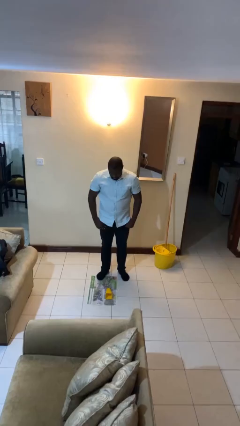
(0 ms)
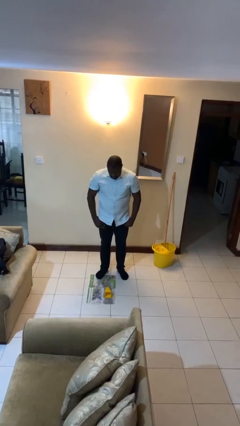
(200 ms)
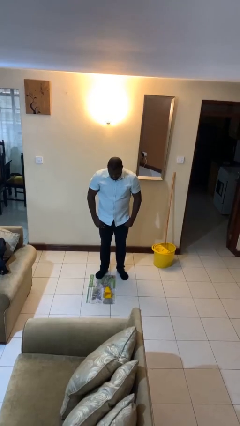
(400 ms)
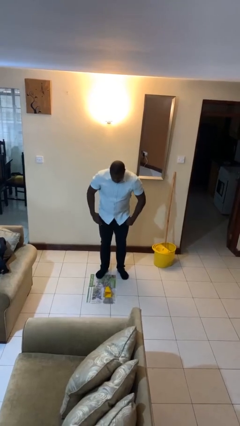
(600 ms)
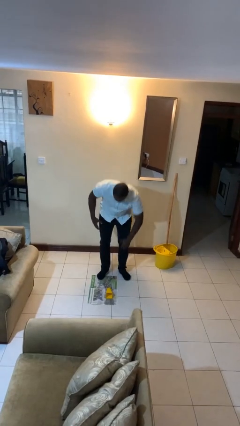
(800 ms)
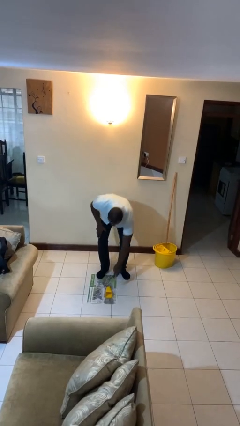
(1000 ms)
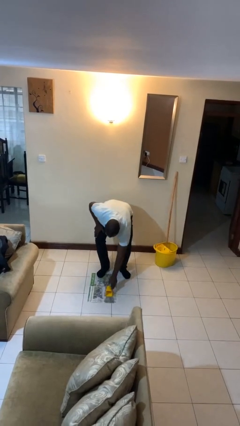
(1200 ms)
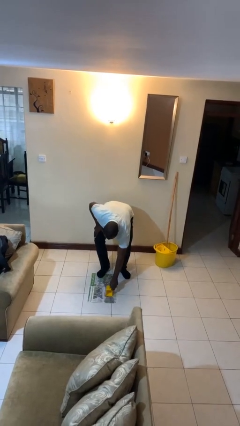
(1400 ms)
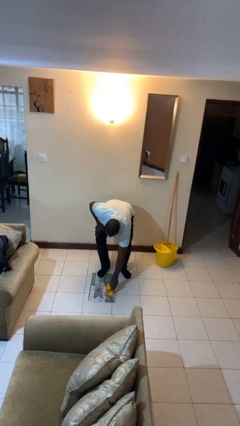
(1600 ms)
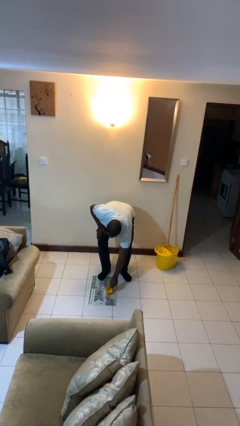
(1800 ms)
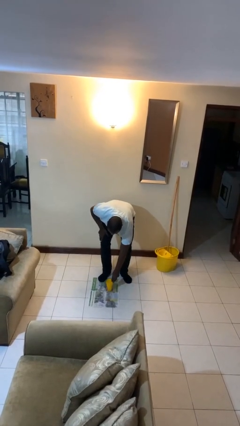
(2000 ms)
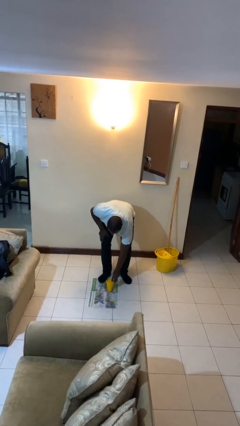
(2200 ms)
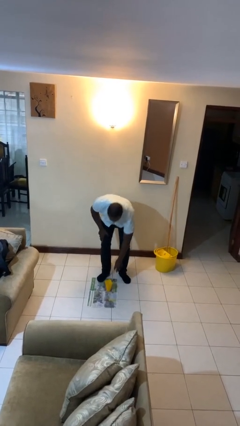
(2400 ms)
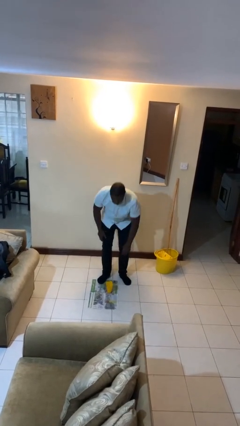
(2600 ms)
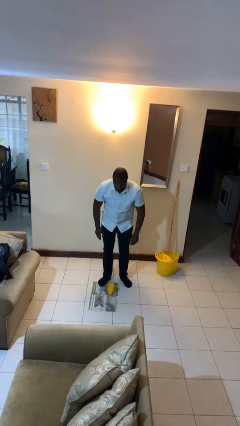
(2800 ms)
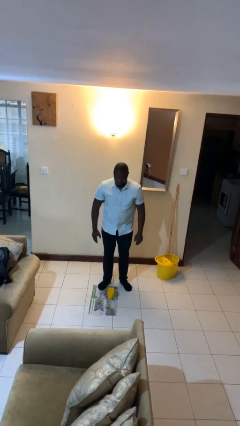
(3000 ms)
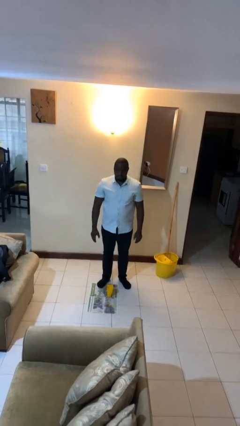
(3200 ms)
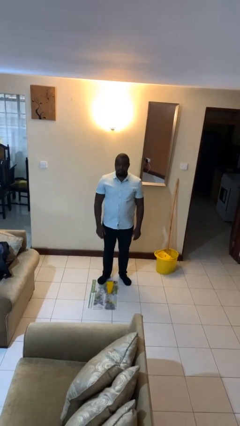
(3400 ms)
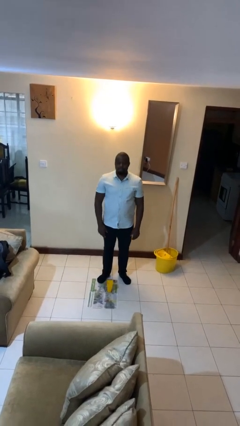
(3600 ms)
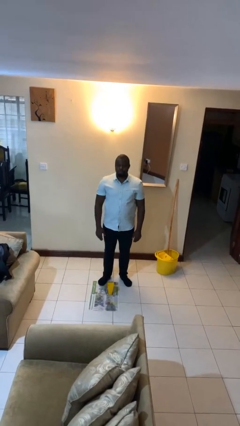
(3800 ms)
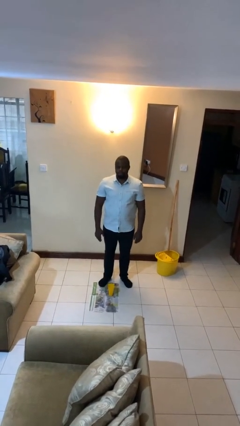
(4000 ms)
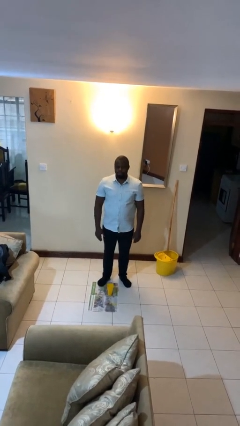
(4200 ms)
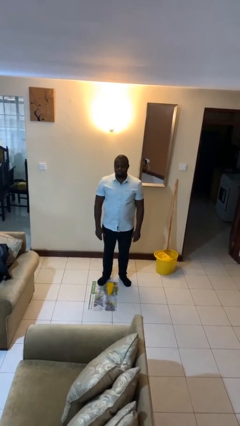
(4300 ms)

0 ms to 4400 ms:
person sets upright glass

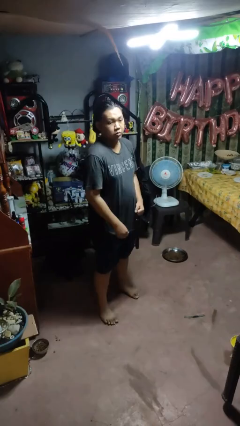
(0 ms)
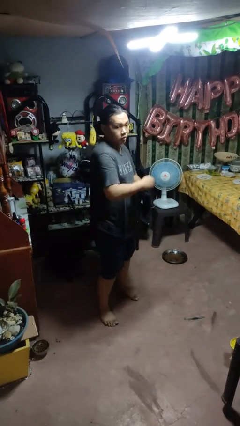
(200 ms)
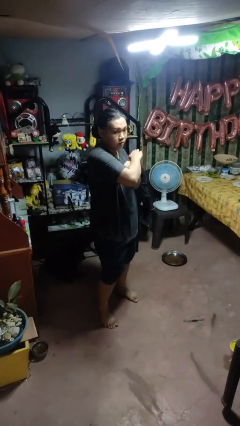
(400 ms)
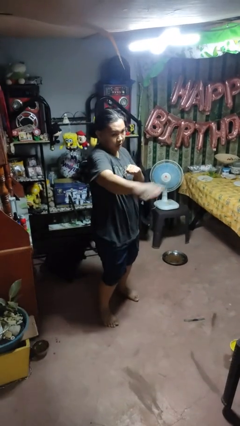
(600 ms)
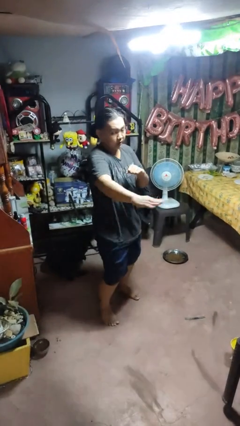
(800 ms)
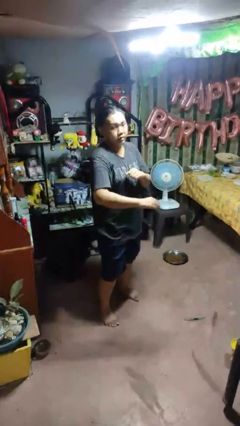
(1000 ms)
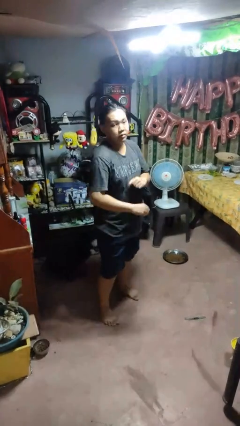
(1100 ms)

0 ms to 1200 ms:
person karate chop

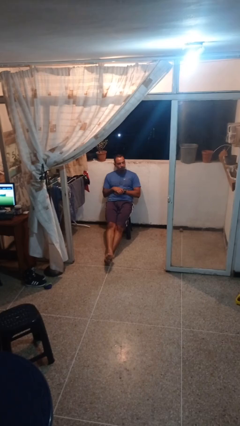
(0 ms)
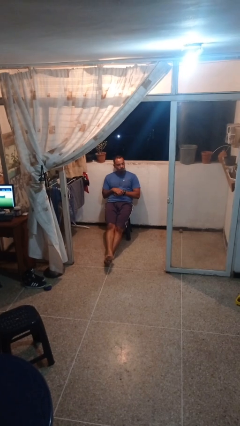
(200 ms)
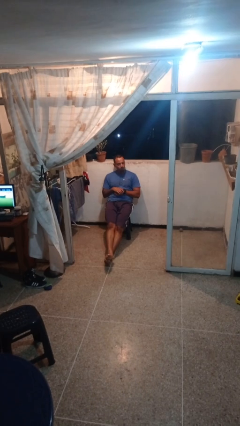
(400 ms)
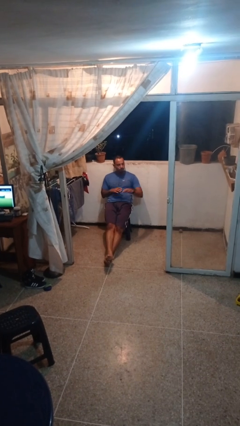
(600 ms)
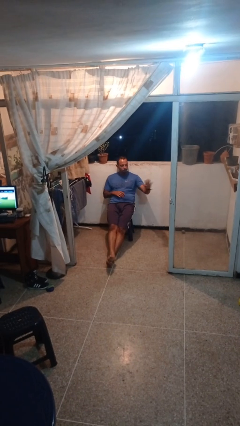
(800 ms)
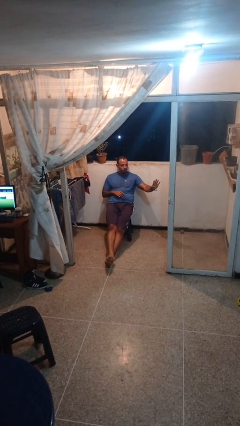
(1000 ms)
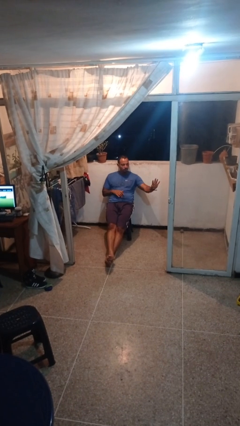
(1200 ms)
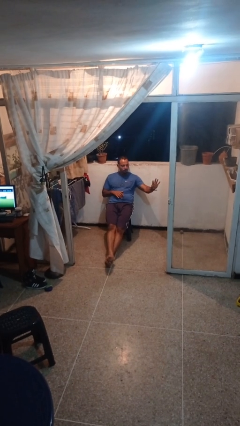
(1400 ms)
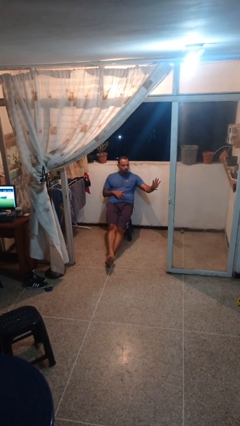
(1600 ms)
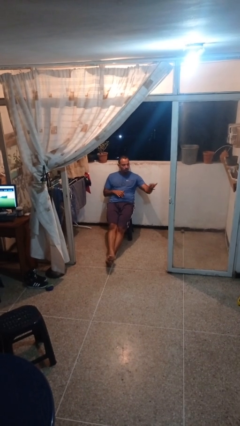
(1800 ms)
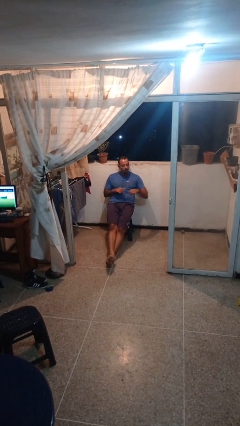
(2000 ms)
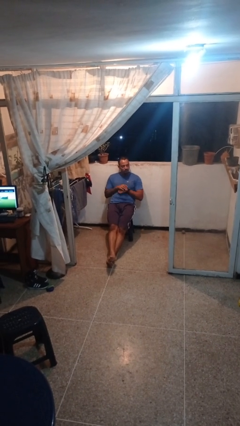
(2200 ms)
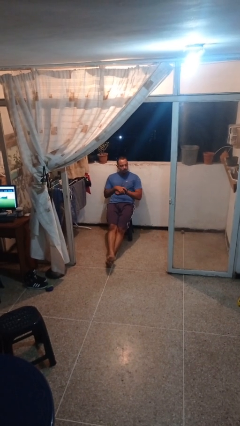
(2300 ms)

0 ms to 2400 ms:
person gestures number four

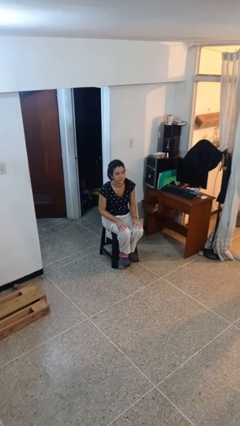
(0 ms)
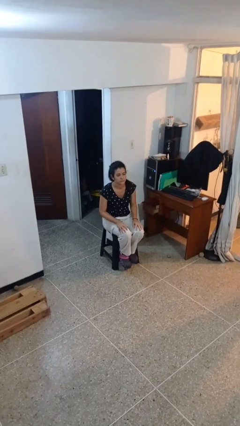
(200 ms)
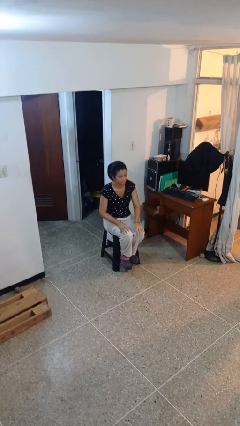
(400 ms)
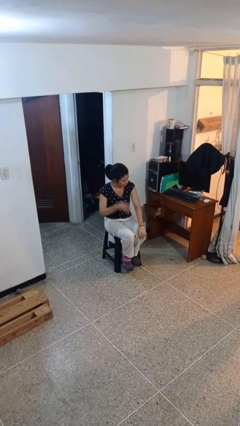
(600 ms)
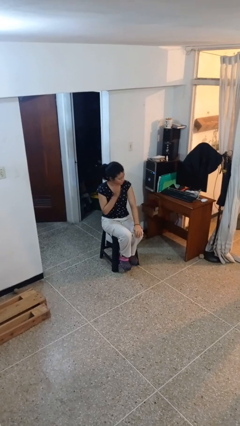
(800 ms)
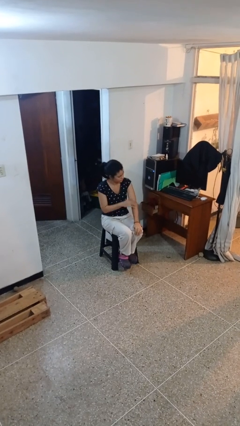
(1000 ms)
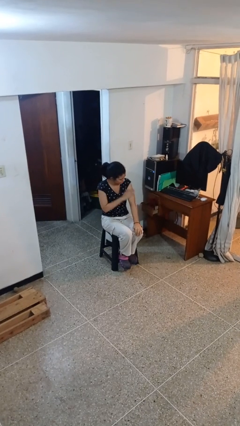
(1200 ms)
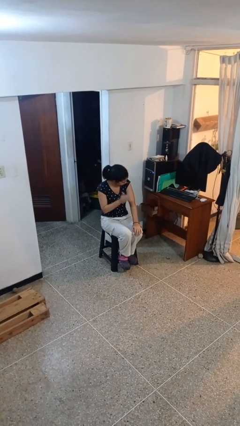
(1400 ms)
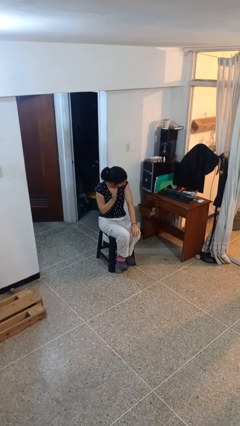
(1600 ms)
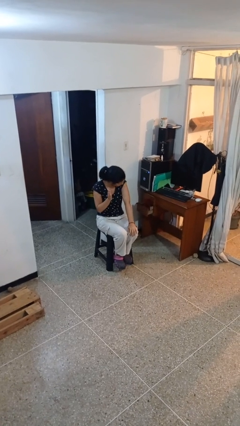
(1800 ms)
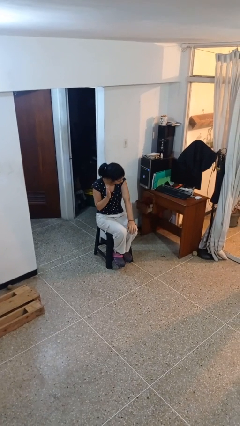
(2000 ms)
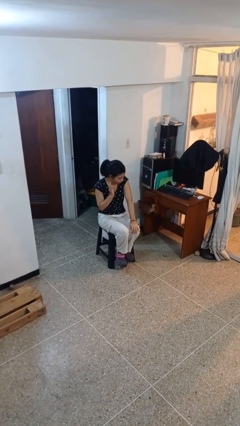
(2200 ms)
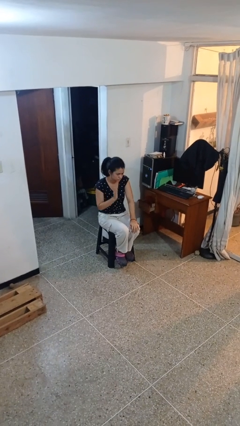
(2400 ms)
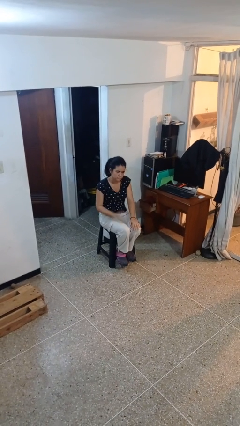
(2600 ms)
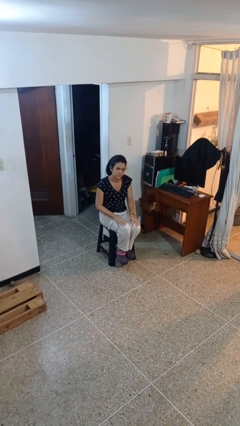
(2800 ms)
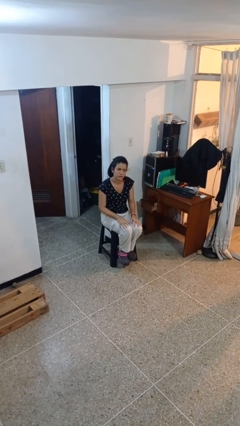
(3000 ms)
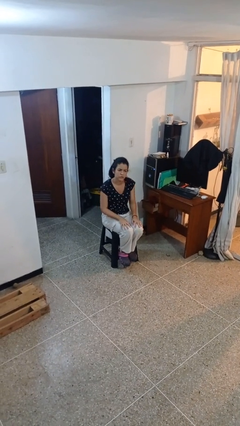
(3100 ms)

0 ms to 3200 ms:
person swats bug

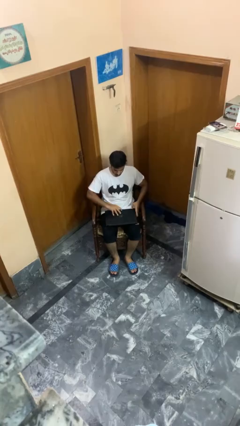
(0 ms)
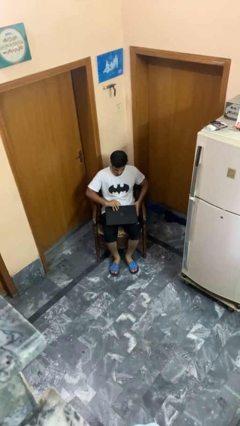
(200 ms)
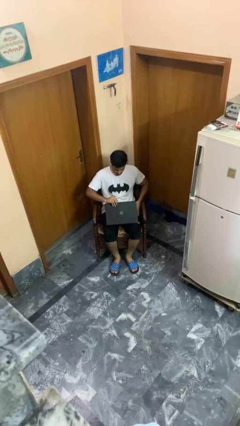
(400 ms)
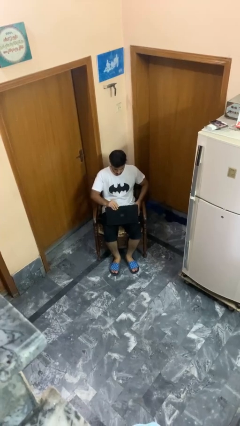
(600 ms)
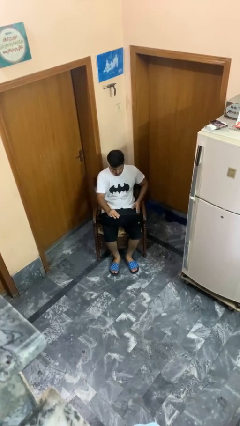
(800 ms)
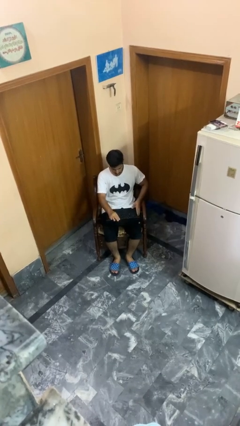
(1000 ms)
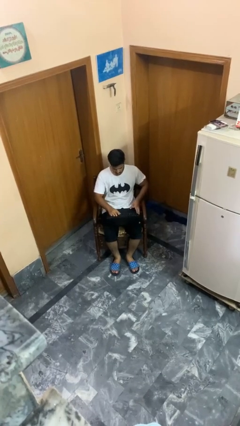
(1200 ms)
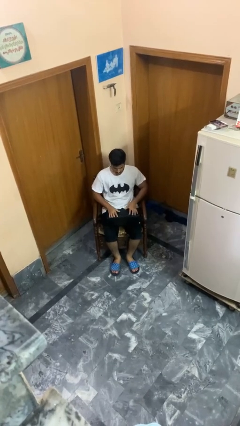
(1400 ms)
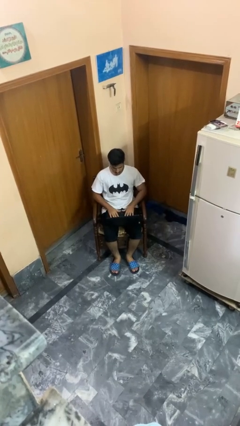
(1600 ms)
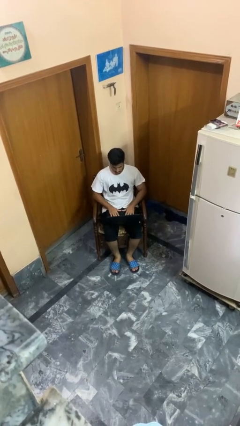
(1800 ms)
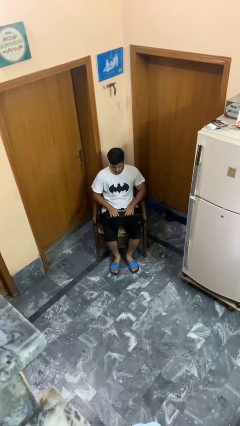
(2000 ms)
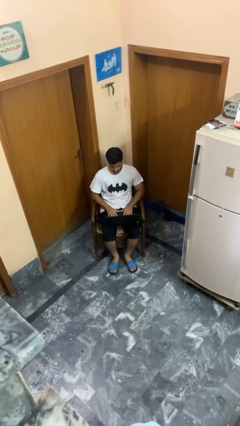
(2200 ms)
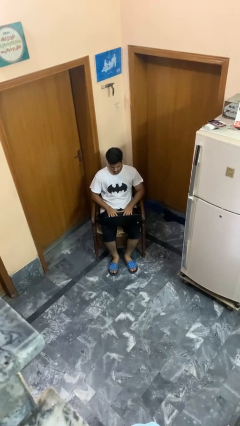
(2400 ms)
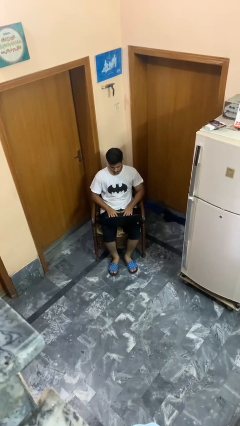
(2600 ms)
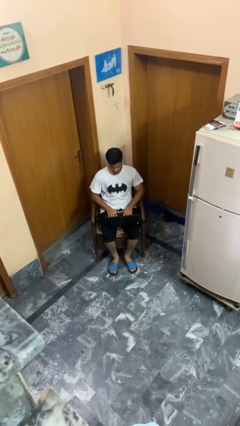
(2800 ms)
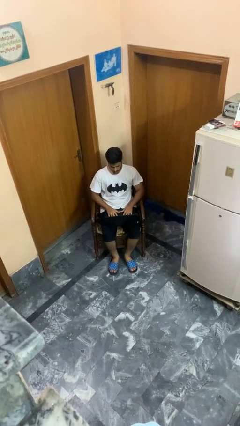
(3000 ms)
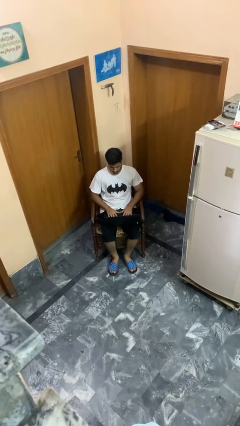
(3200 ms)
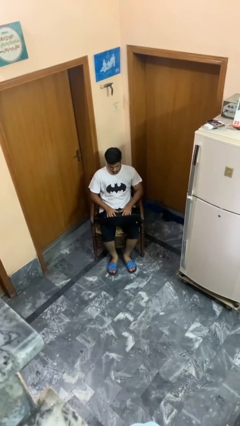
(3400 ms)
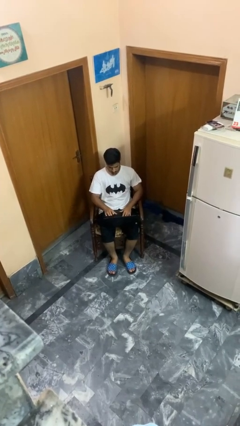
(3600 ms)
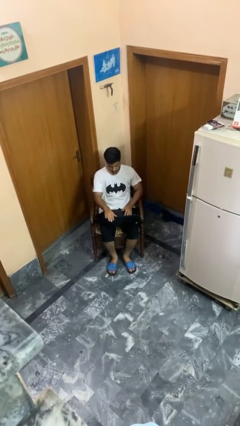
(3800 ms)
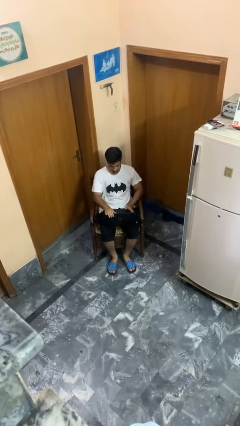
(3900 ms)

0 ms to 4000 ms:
person opens laptop

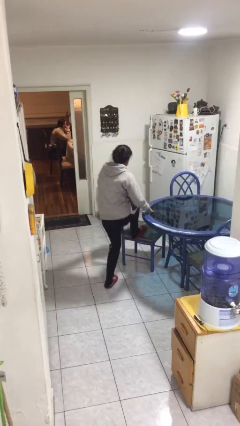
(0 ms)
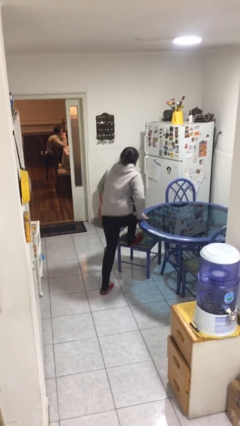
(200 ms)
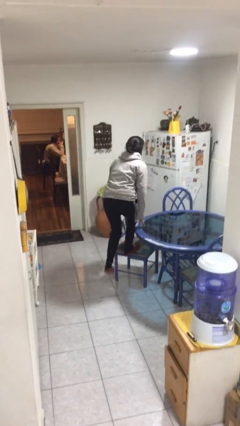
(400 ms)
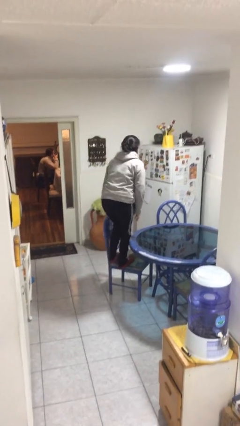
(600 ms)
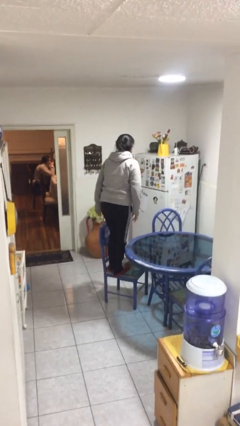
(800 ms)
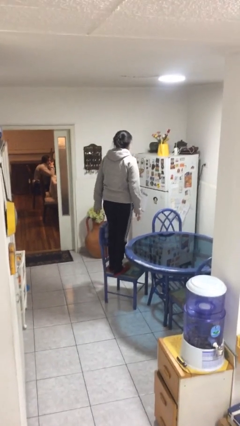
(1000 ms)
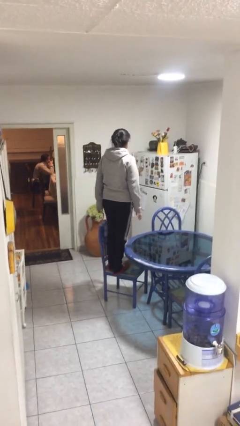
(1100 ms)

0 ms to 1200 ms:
person climbs on chair

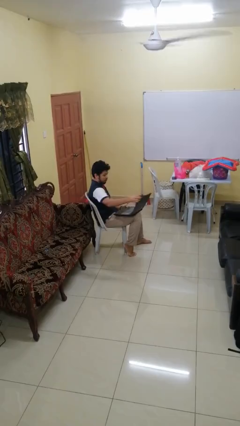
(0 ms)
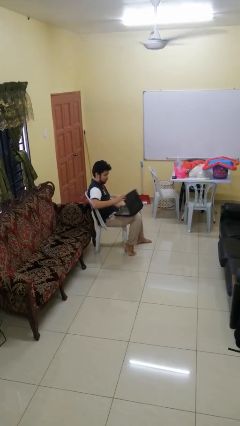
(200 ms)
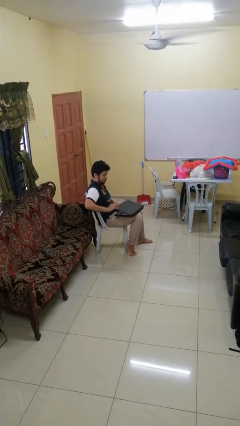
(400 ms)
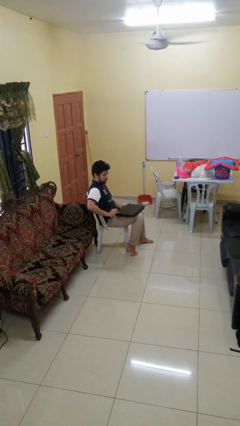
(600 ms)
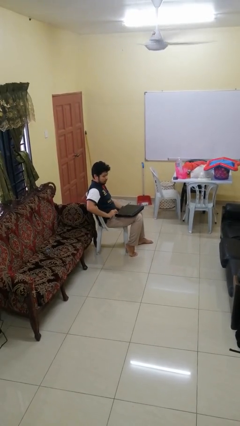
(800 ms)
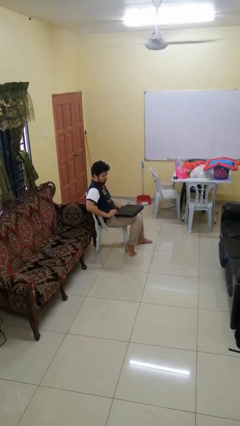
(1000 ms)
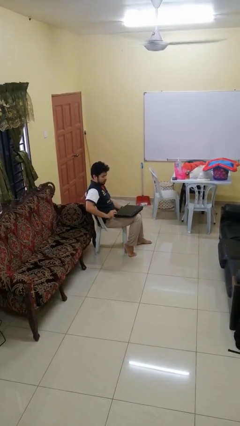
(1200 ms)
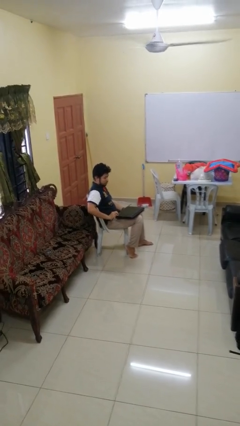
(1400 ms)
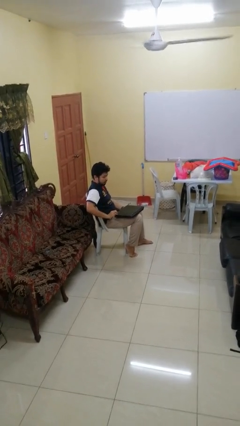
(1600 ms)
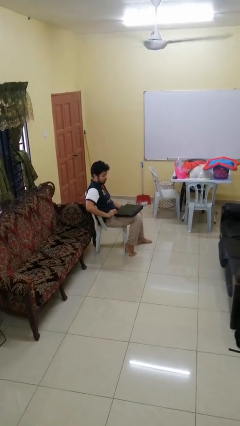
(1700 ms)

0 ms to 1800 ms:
person closes laptop
